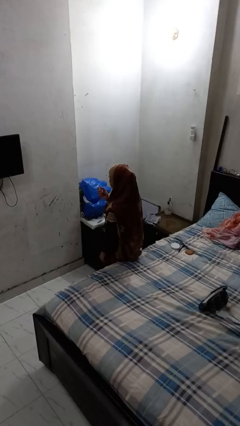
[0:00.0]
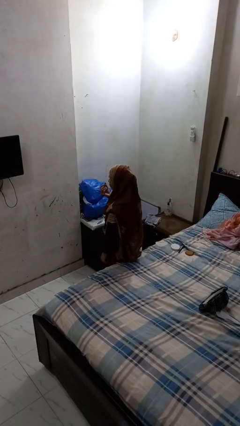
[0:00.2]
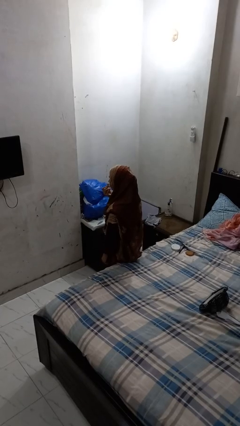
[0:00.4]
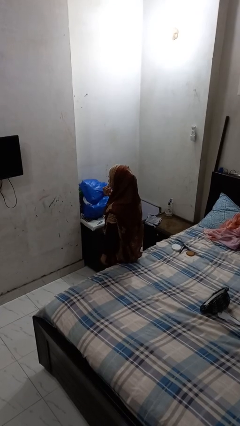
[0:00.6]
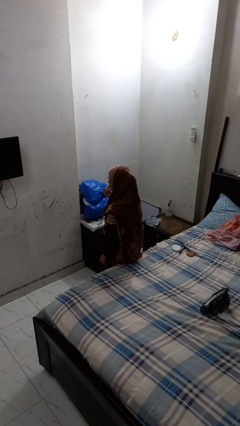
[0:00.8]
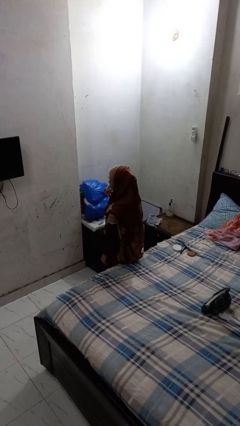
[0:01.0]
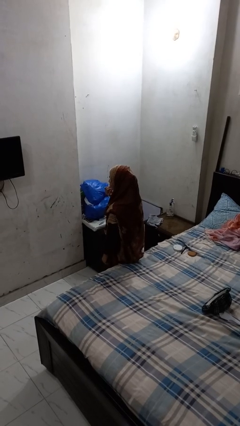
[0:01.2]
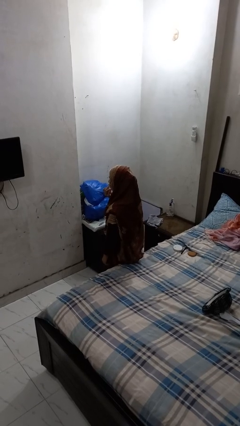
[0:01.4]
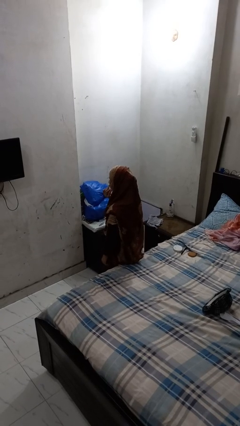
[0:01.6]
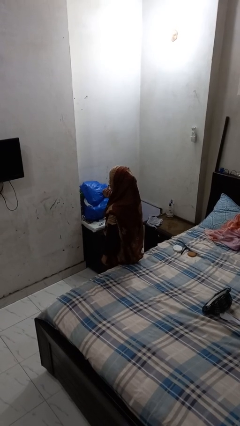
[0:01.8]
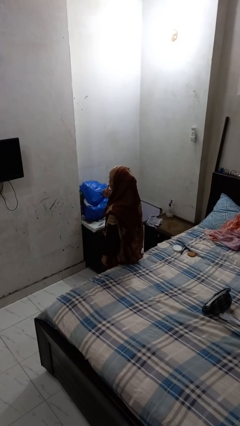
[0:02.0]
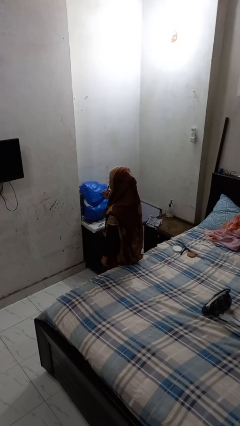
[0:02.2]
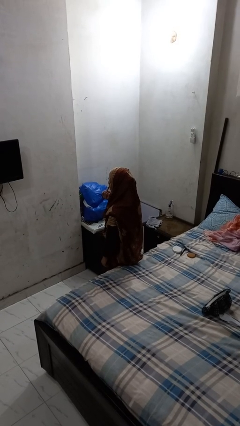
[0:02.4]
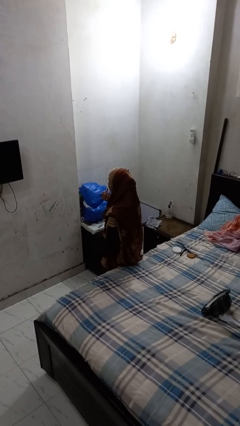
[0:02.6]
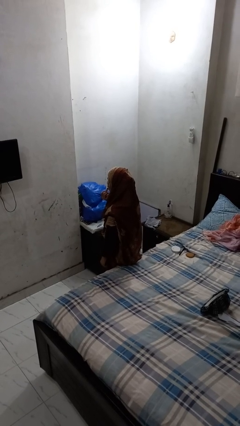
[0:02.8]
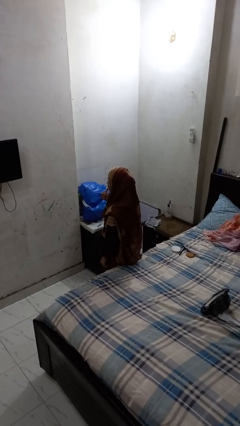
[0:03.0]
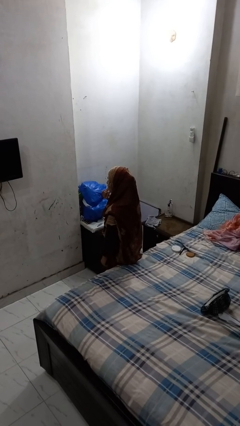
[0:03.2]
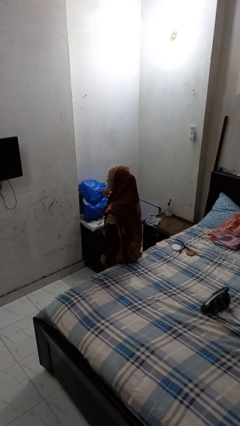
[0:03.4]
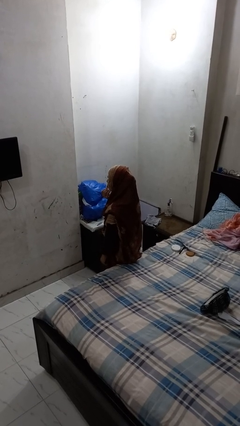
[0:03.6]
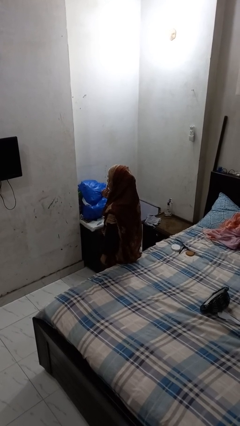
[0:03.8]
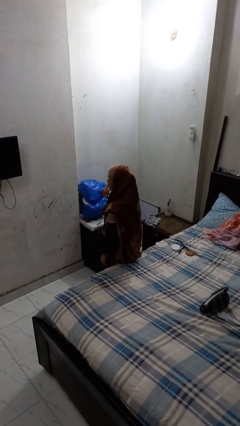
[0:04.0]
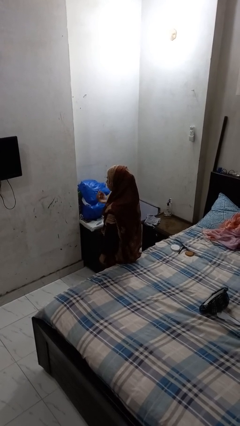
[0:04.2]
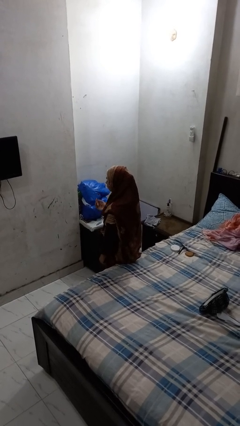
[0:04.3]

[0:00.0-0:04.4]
person applies lip makeup

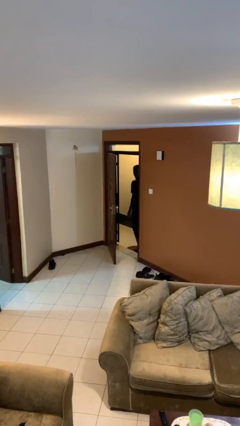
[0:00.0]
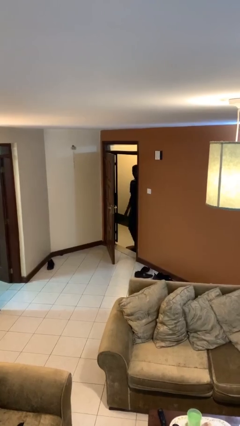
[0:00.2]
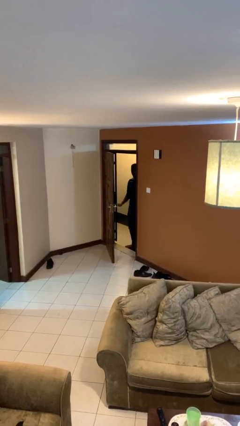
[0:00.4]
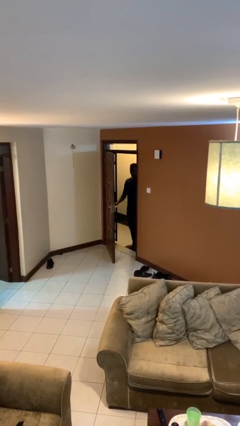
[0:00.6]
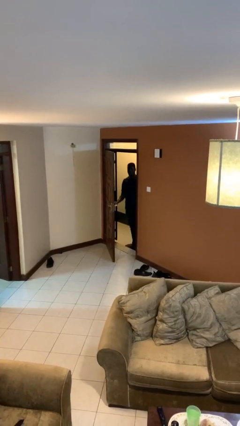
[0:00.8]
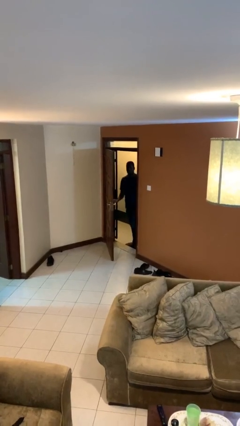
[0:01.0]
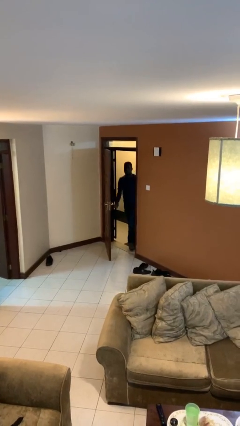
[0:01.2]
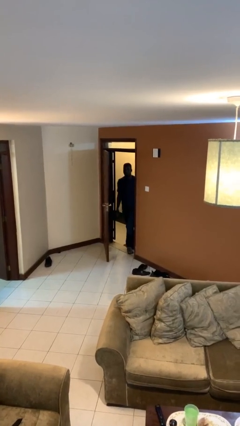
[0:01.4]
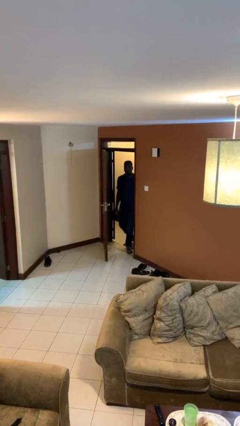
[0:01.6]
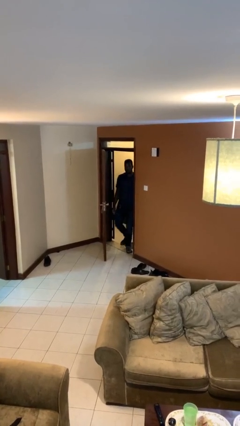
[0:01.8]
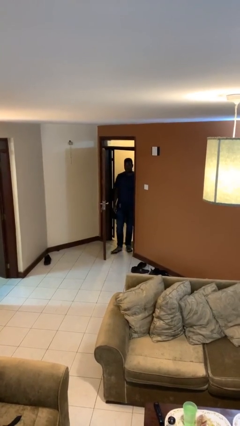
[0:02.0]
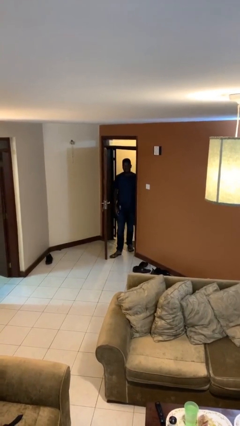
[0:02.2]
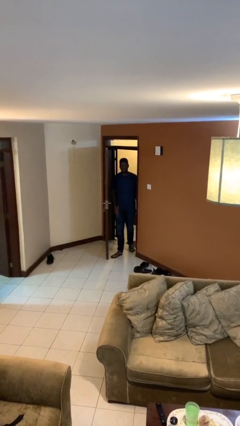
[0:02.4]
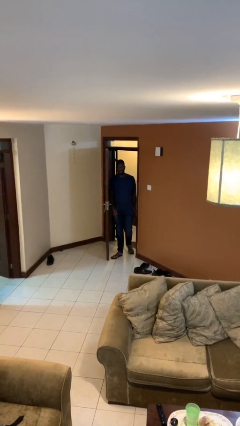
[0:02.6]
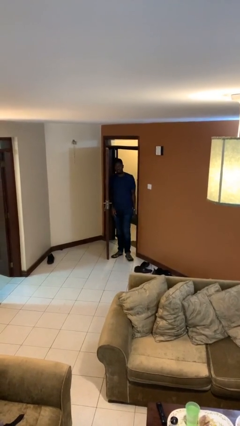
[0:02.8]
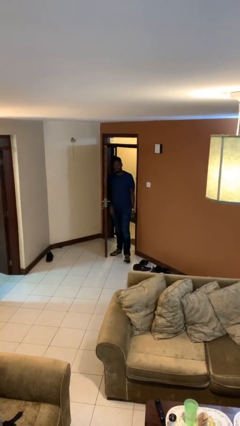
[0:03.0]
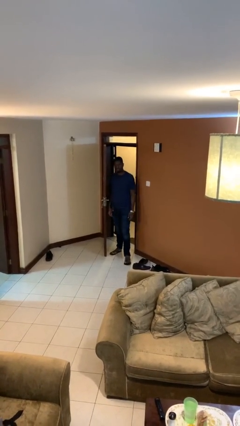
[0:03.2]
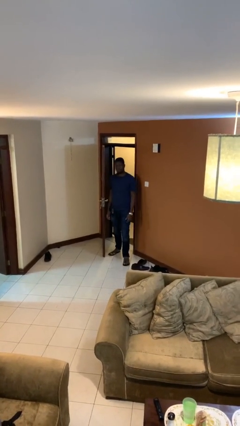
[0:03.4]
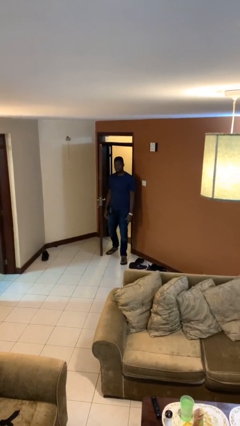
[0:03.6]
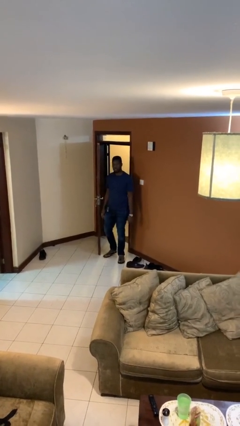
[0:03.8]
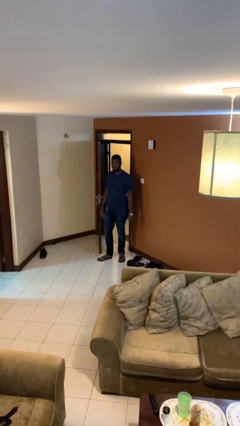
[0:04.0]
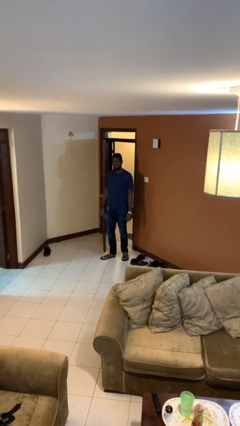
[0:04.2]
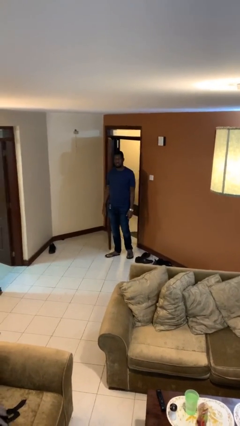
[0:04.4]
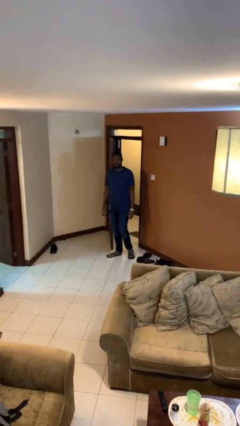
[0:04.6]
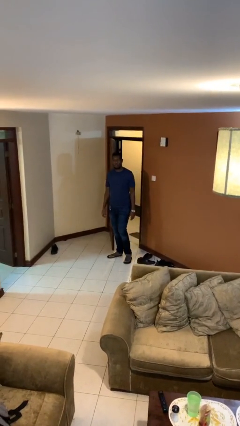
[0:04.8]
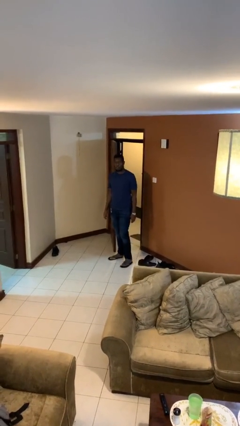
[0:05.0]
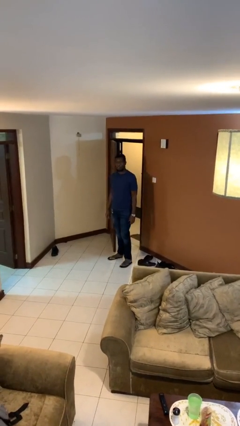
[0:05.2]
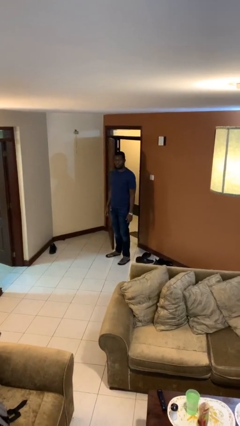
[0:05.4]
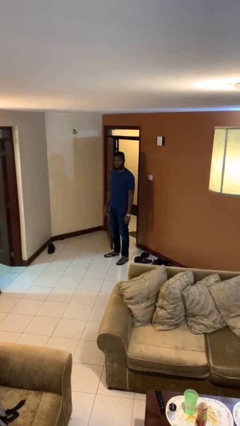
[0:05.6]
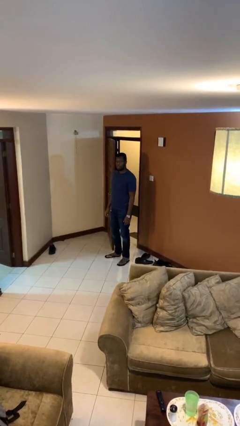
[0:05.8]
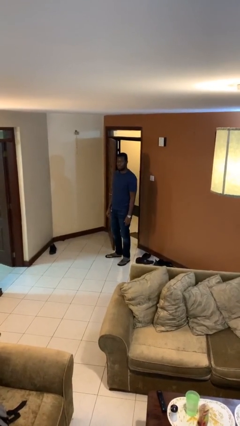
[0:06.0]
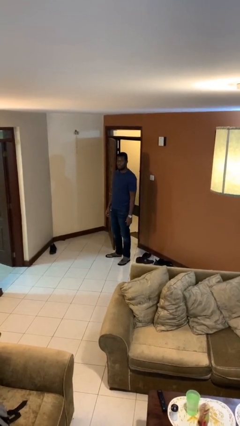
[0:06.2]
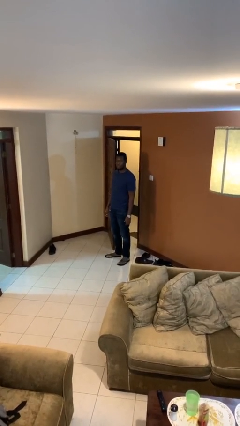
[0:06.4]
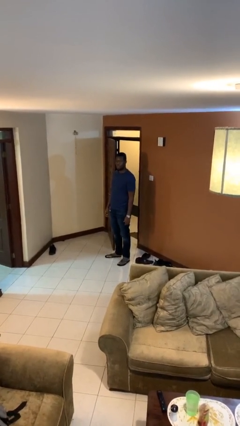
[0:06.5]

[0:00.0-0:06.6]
person enters scene through structure

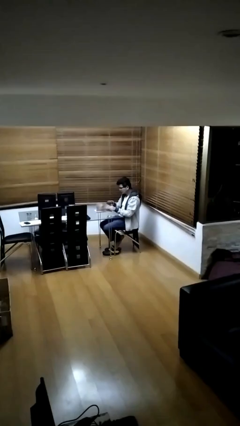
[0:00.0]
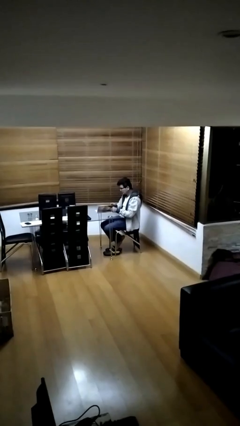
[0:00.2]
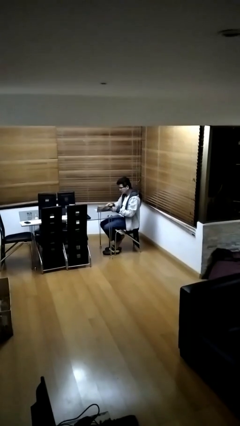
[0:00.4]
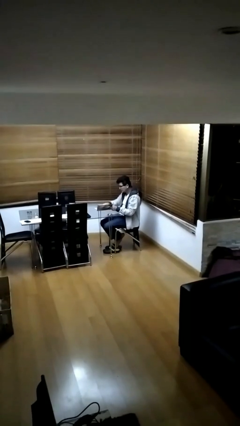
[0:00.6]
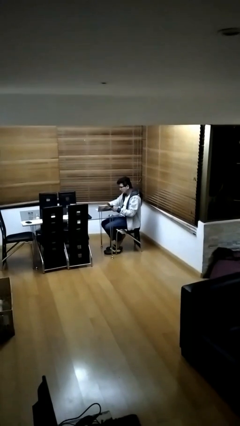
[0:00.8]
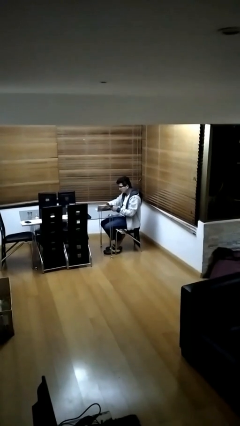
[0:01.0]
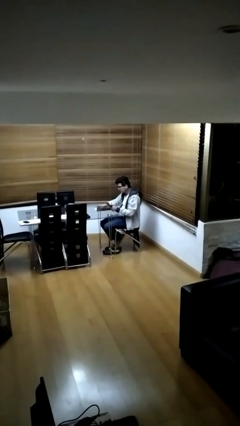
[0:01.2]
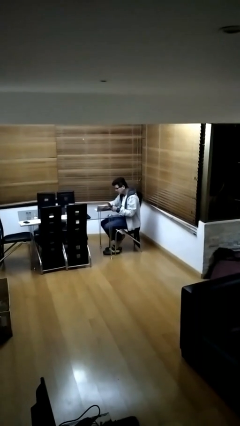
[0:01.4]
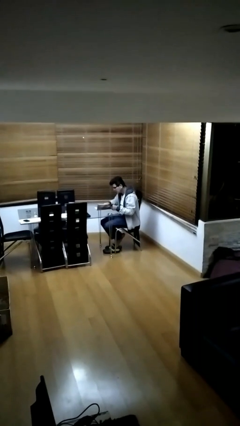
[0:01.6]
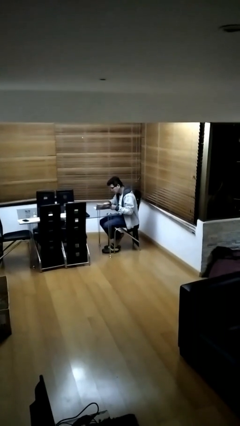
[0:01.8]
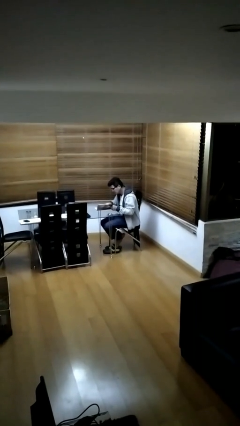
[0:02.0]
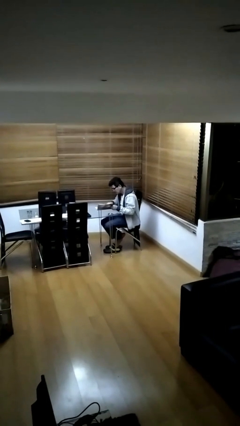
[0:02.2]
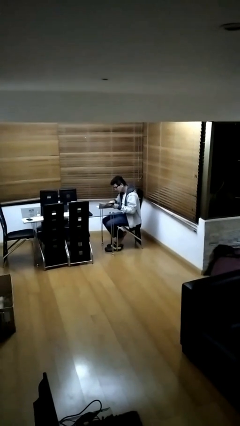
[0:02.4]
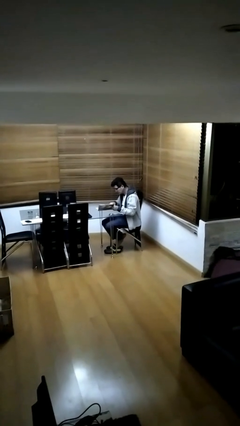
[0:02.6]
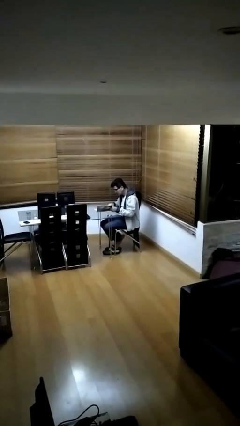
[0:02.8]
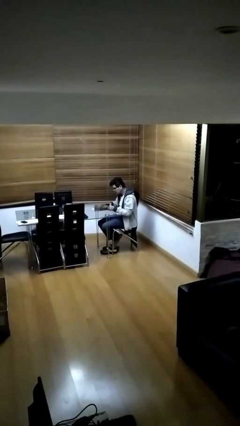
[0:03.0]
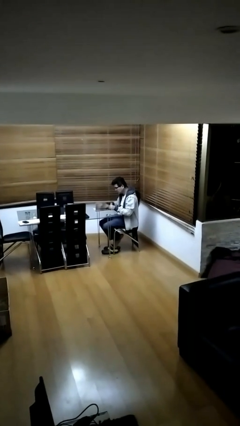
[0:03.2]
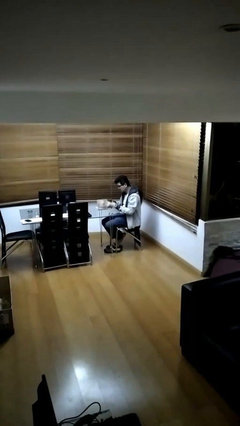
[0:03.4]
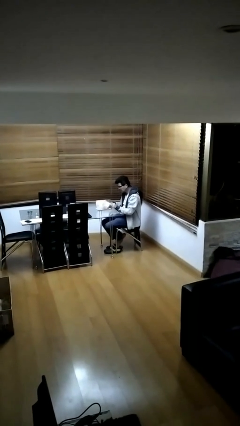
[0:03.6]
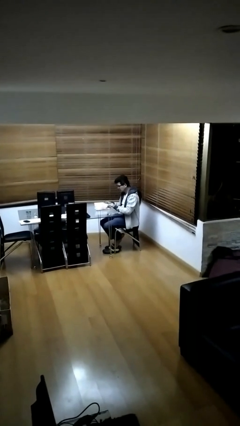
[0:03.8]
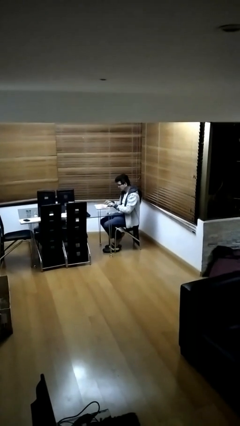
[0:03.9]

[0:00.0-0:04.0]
person reads document

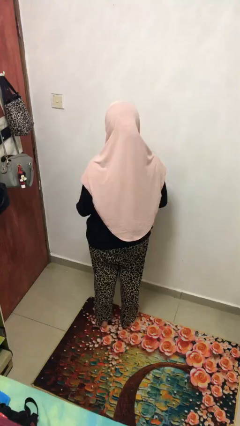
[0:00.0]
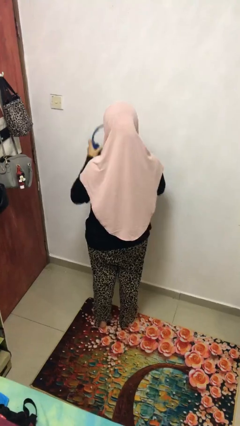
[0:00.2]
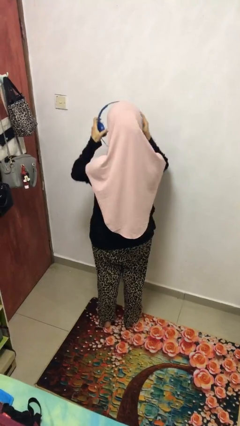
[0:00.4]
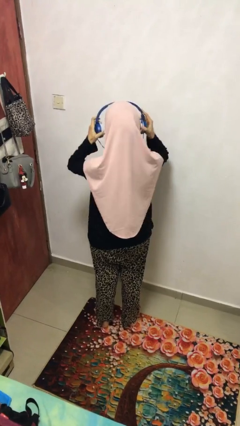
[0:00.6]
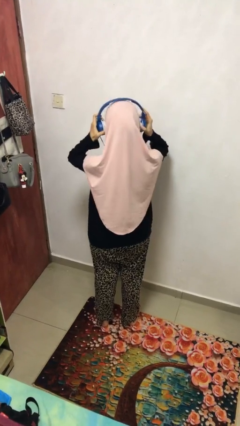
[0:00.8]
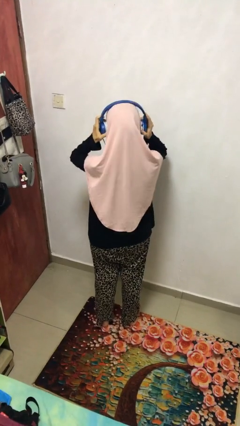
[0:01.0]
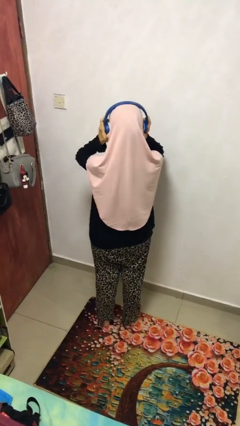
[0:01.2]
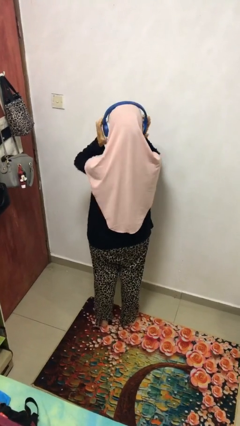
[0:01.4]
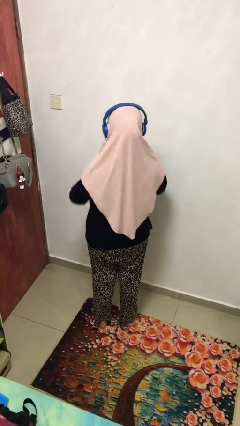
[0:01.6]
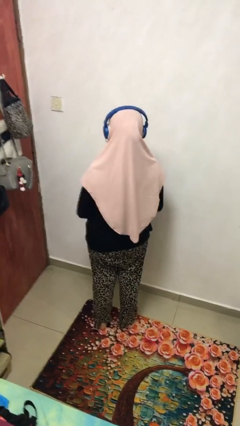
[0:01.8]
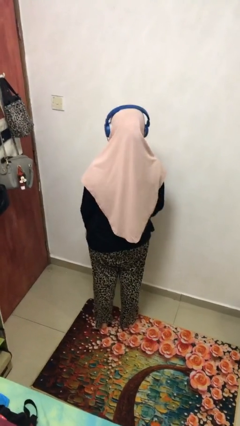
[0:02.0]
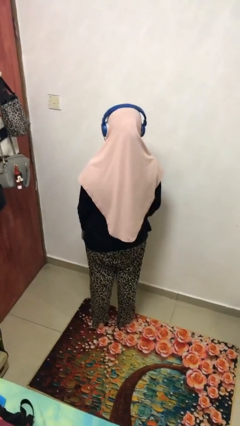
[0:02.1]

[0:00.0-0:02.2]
person puts on headphones
